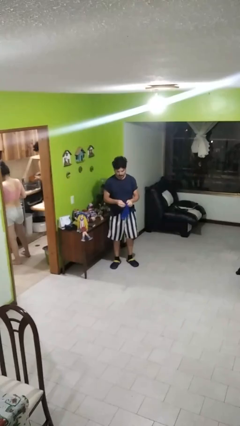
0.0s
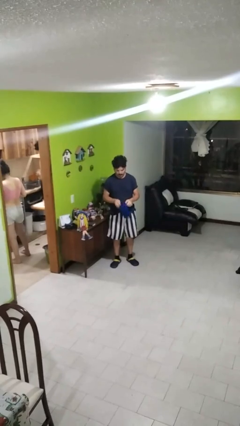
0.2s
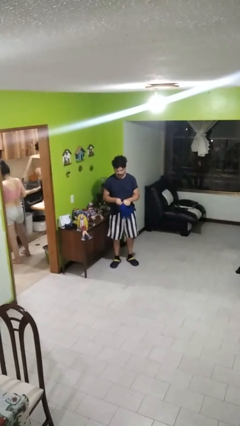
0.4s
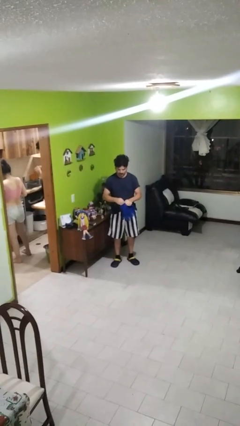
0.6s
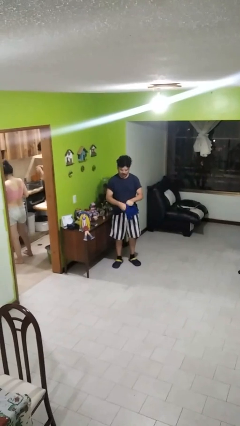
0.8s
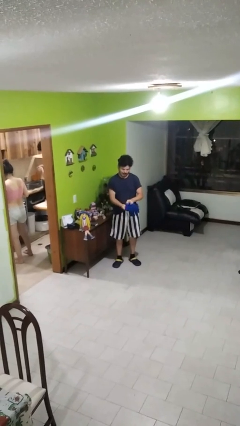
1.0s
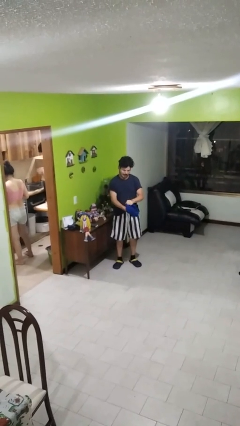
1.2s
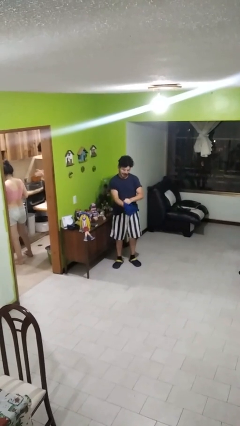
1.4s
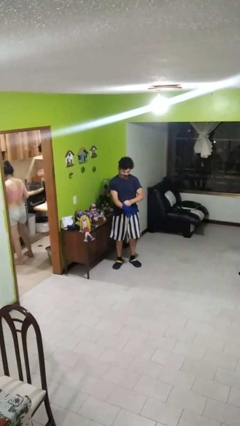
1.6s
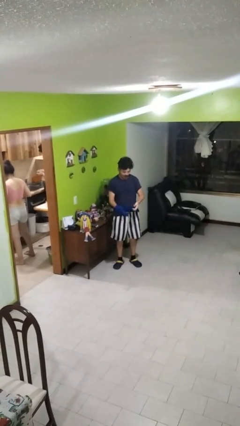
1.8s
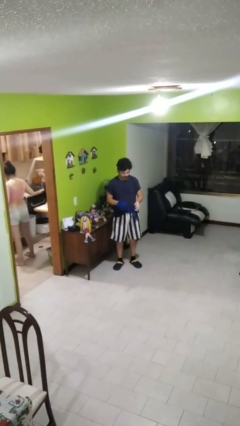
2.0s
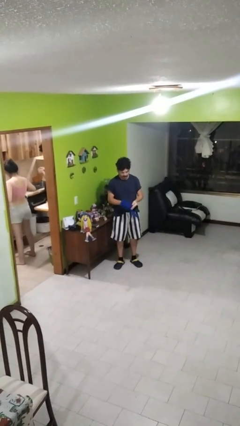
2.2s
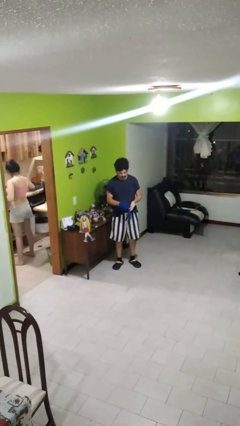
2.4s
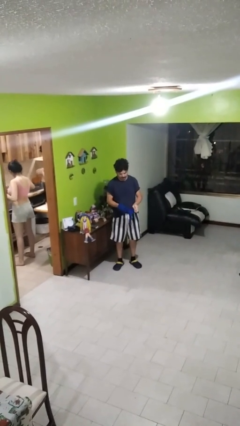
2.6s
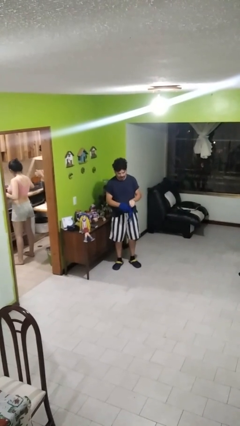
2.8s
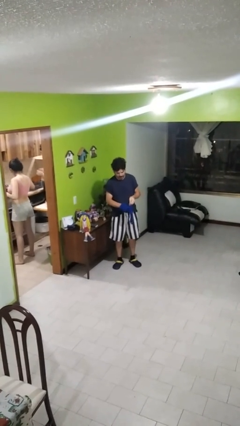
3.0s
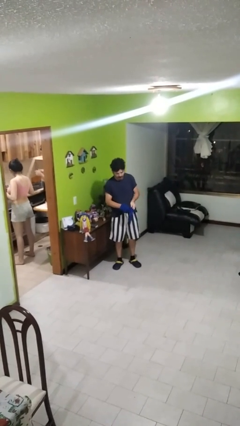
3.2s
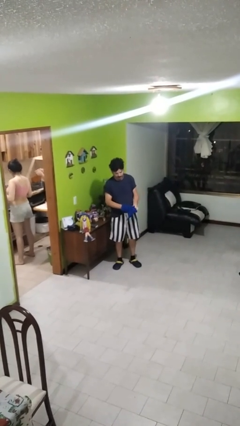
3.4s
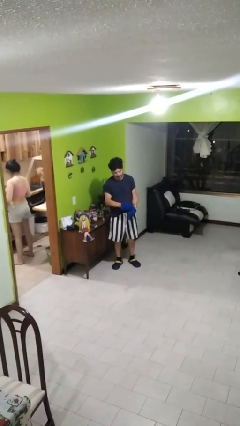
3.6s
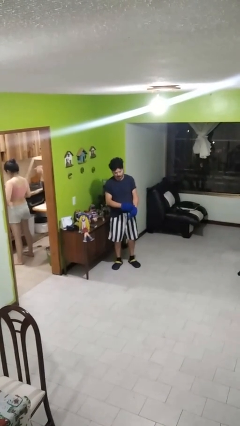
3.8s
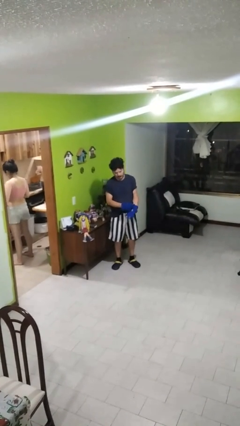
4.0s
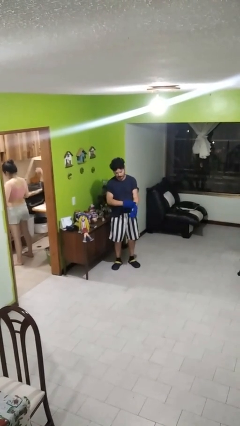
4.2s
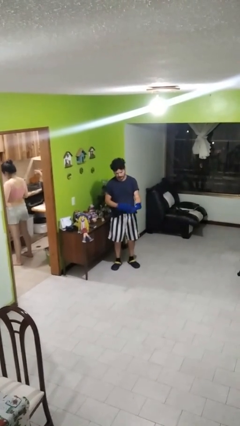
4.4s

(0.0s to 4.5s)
person puts on gloves

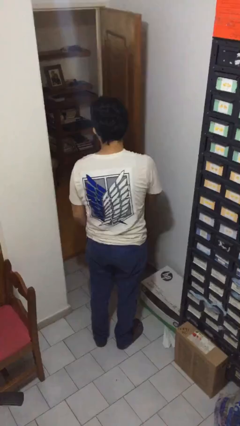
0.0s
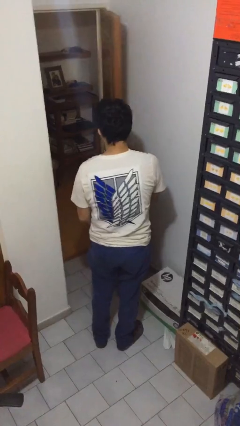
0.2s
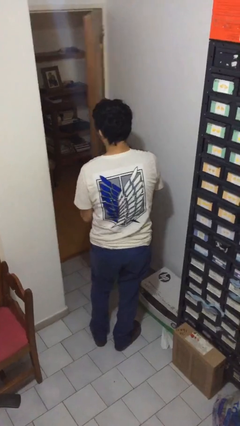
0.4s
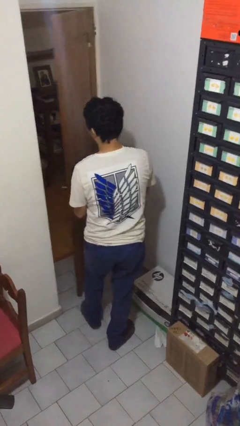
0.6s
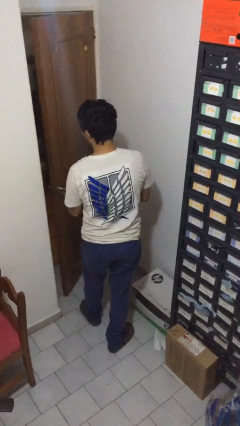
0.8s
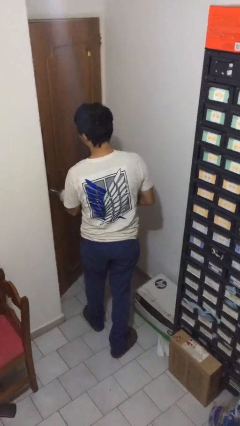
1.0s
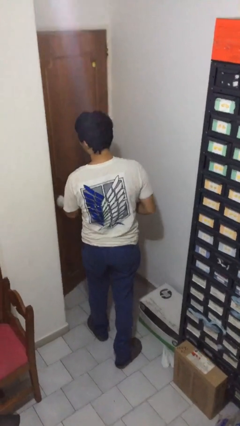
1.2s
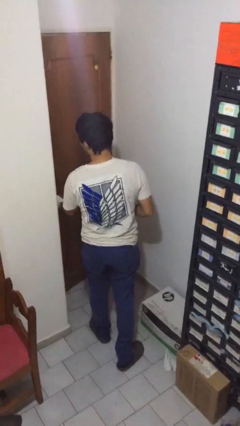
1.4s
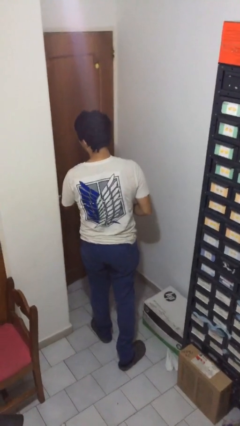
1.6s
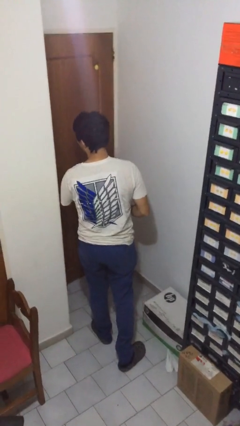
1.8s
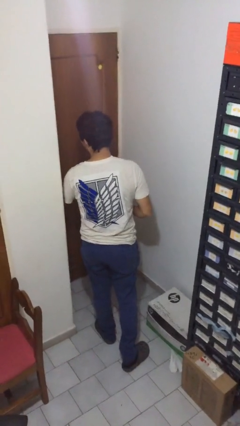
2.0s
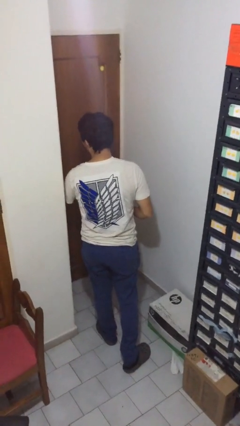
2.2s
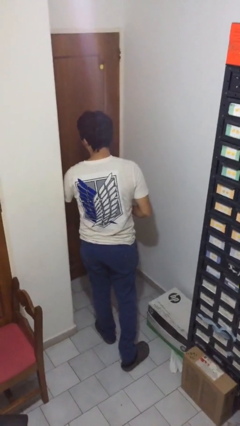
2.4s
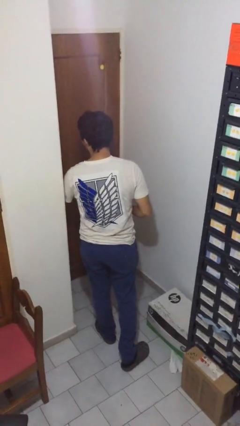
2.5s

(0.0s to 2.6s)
person closes facility door

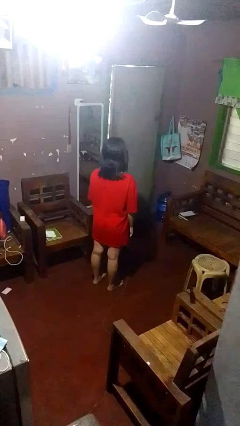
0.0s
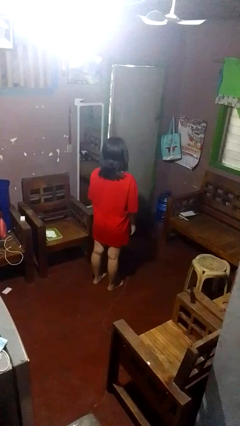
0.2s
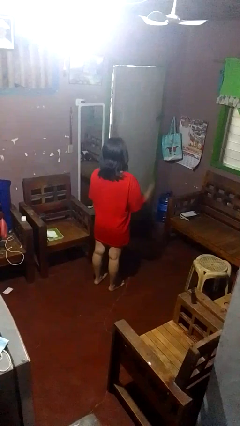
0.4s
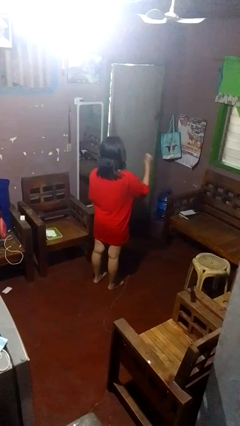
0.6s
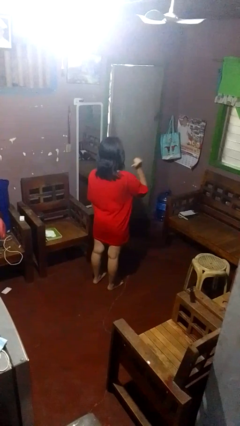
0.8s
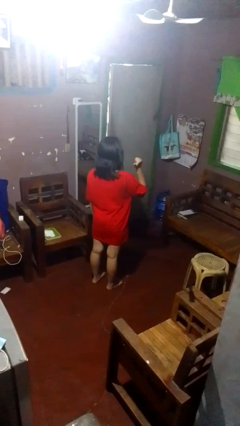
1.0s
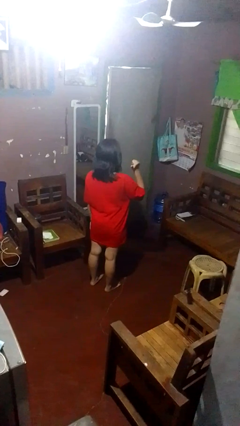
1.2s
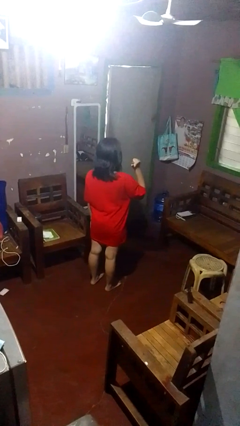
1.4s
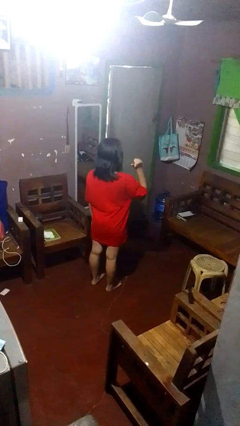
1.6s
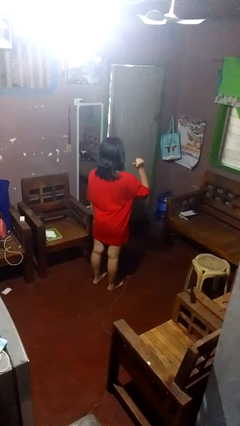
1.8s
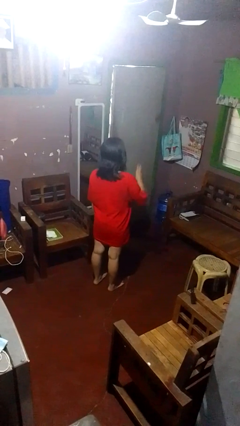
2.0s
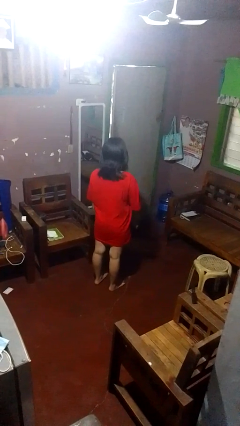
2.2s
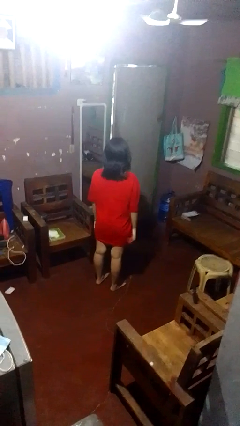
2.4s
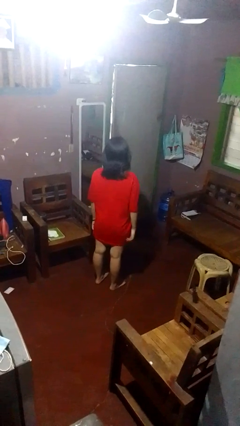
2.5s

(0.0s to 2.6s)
person gestures behind me

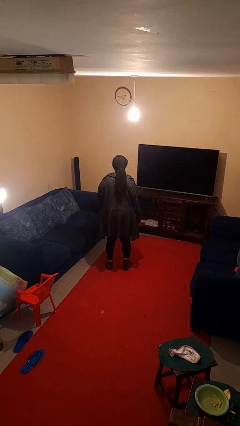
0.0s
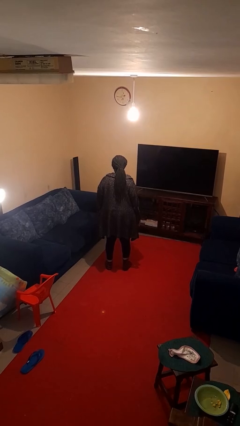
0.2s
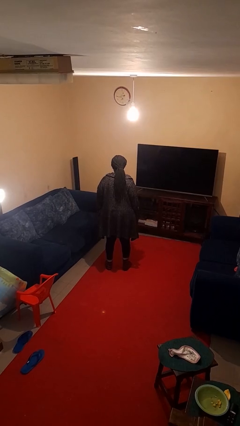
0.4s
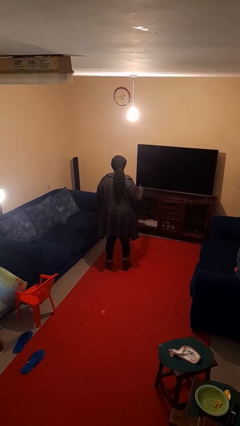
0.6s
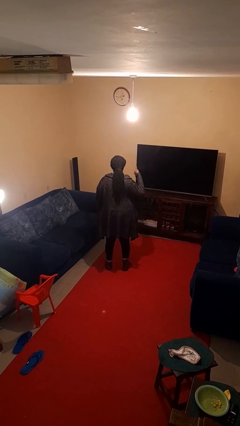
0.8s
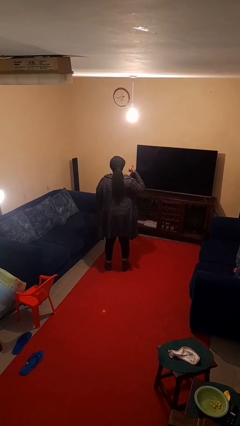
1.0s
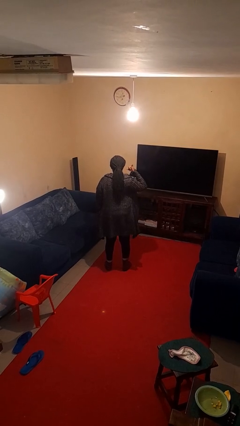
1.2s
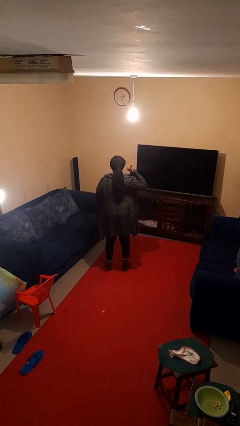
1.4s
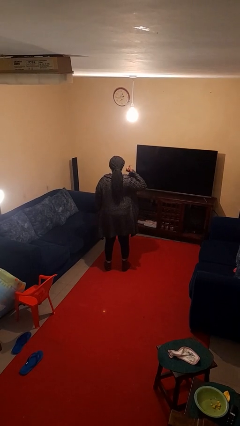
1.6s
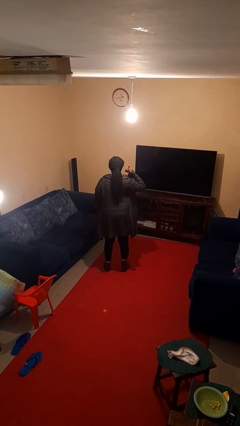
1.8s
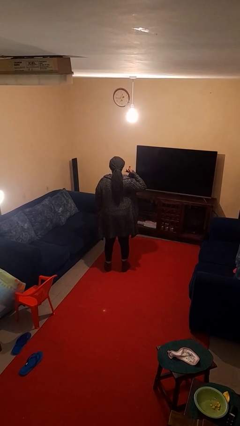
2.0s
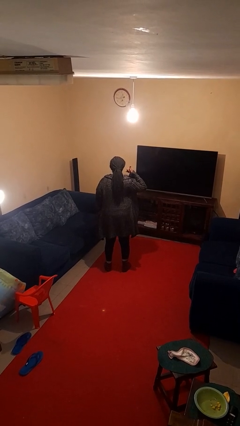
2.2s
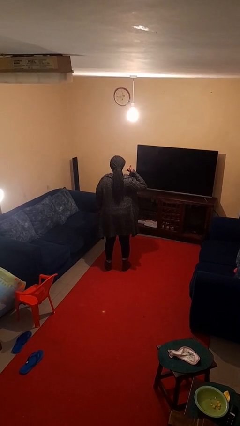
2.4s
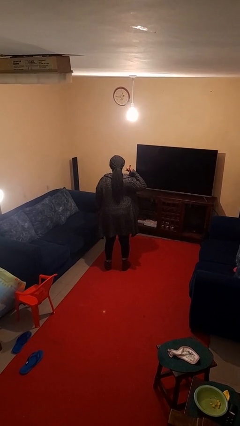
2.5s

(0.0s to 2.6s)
person gestures call me

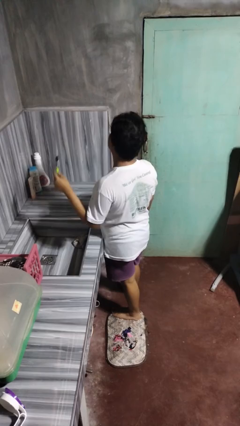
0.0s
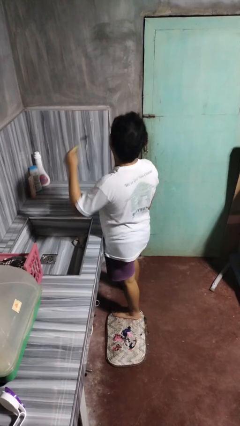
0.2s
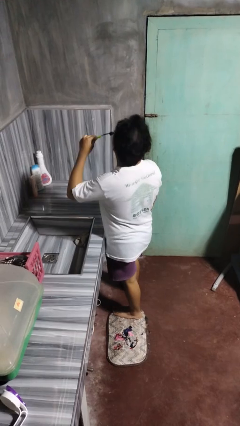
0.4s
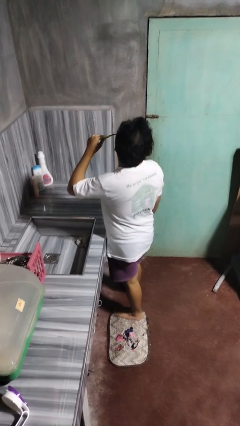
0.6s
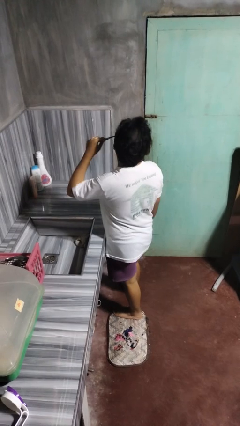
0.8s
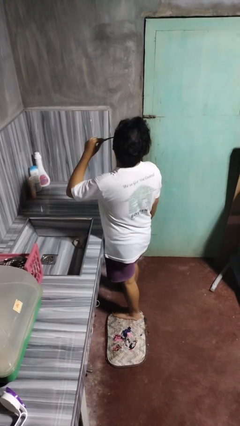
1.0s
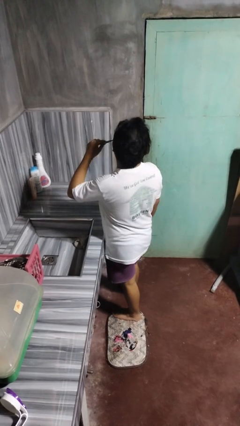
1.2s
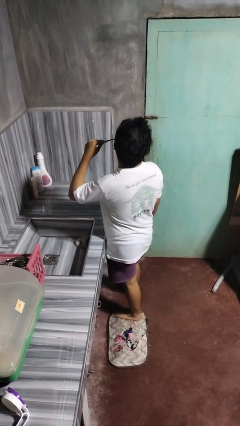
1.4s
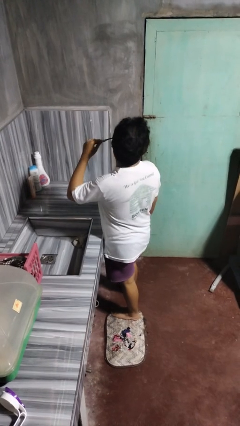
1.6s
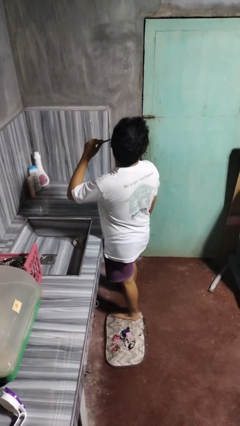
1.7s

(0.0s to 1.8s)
person brushes teeth

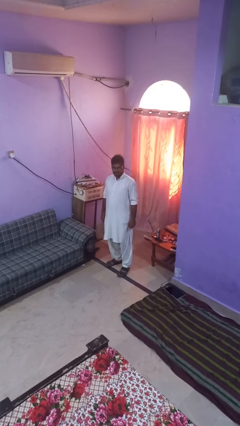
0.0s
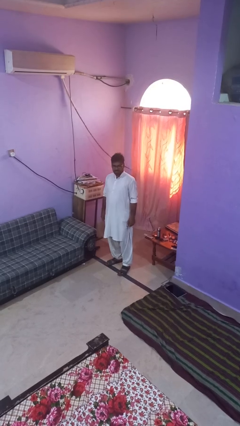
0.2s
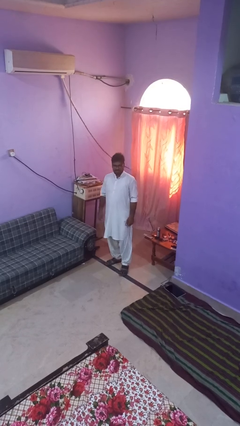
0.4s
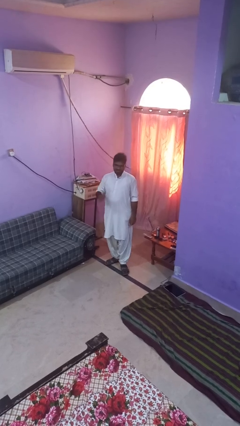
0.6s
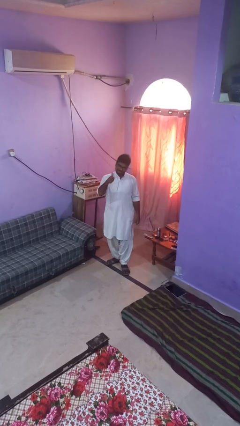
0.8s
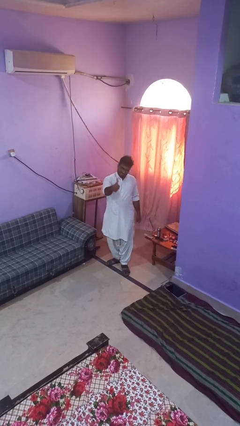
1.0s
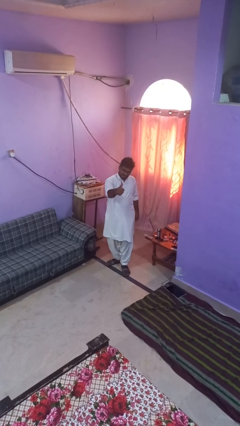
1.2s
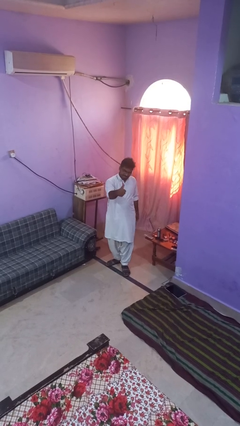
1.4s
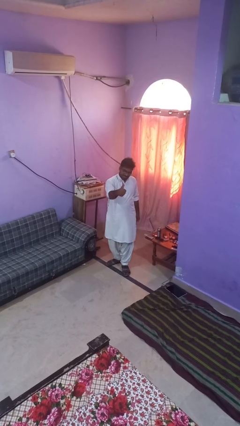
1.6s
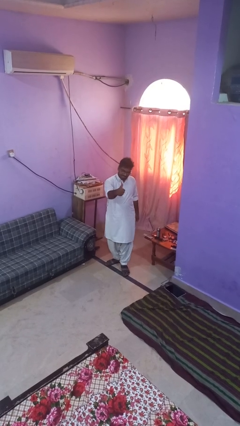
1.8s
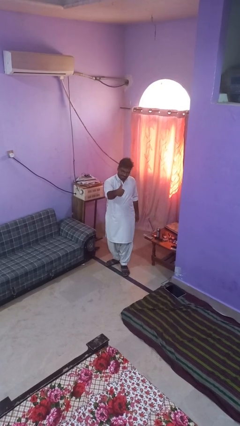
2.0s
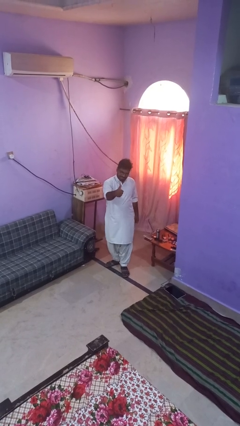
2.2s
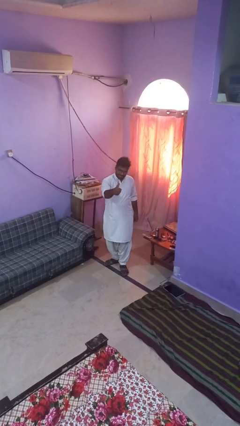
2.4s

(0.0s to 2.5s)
person gestures thumbs up

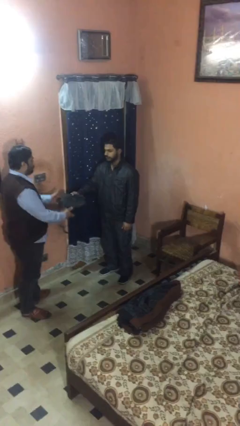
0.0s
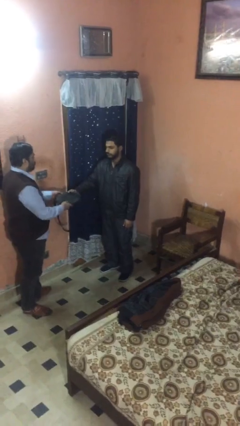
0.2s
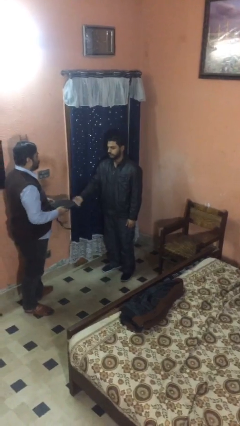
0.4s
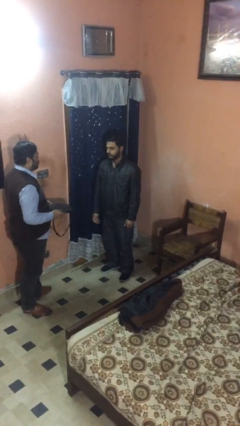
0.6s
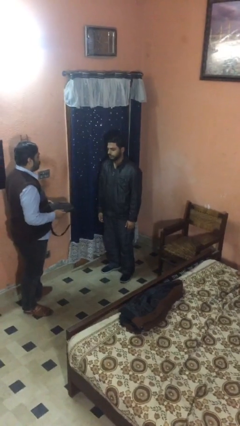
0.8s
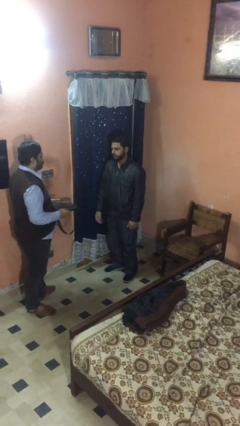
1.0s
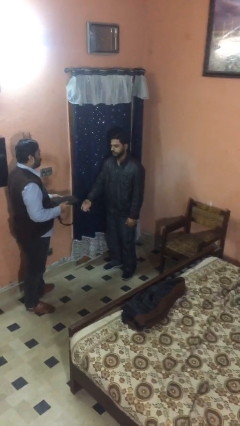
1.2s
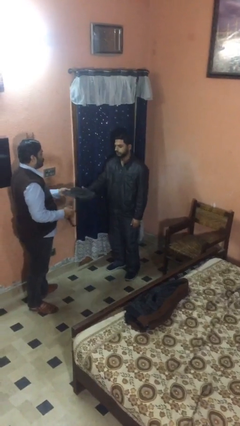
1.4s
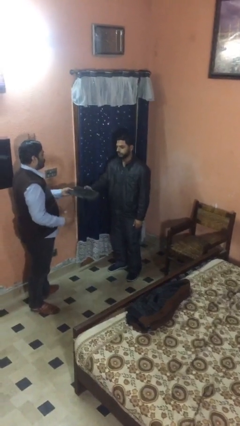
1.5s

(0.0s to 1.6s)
person transfers object to person
